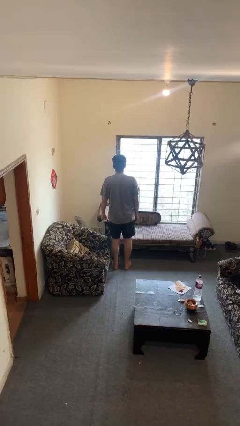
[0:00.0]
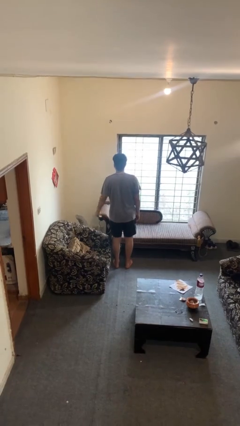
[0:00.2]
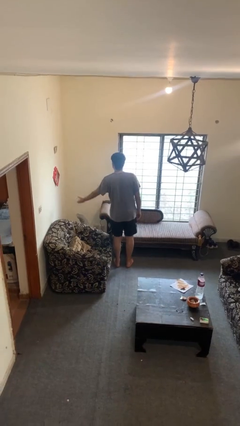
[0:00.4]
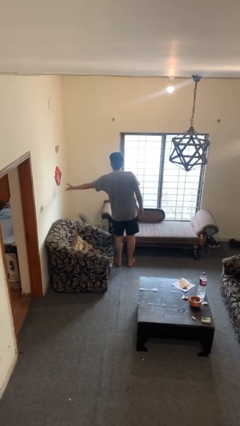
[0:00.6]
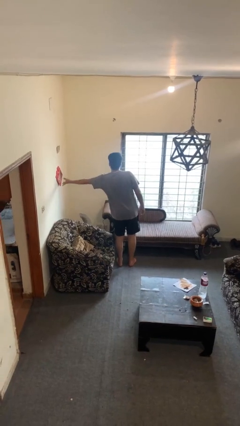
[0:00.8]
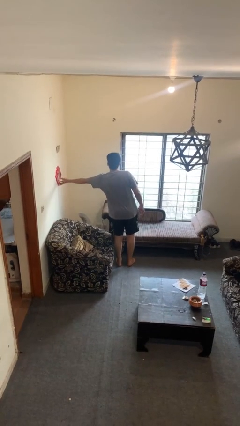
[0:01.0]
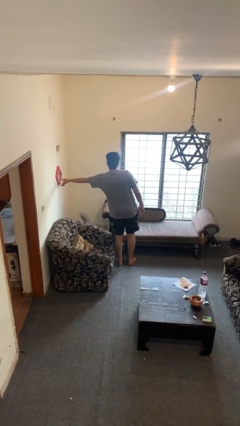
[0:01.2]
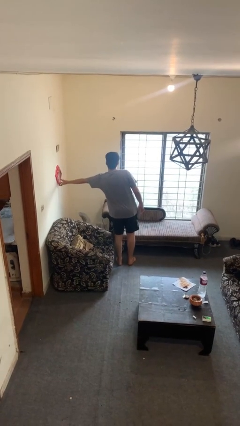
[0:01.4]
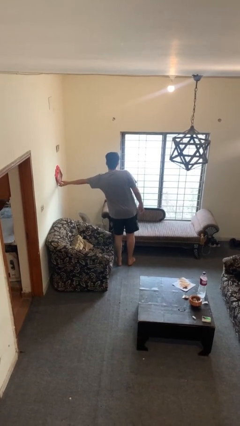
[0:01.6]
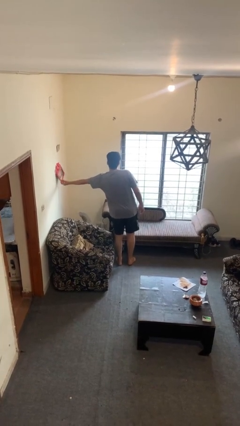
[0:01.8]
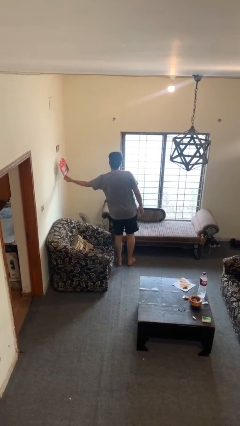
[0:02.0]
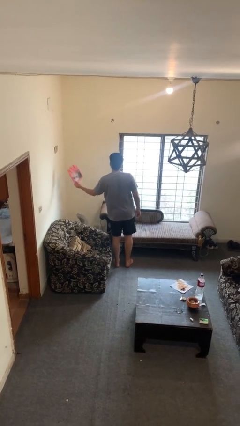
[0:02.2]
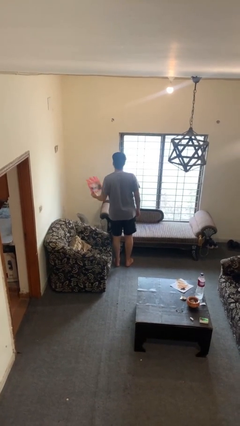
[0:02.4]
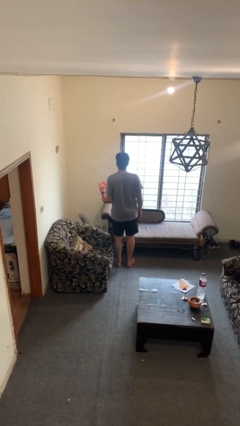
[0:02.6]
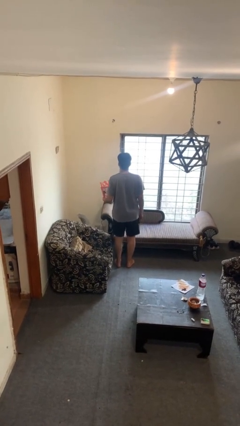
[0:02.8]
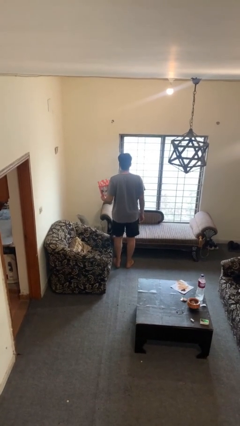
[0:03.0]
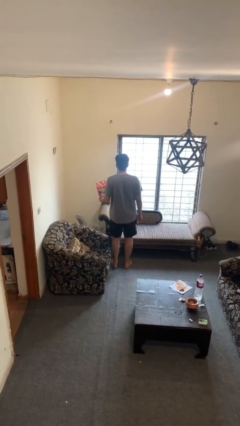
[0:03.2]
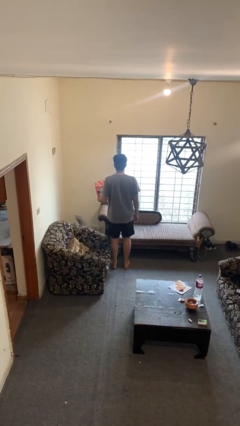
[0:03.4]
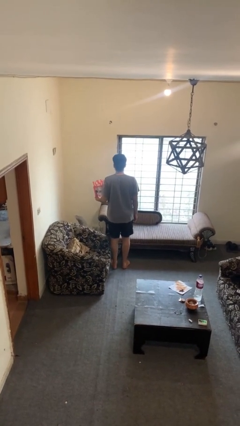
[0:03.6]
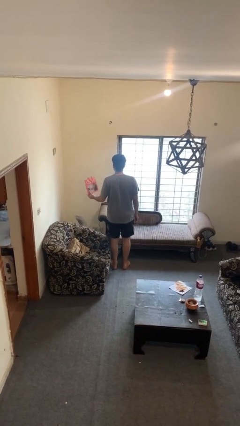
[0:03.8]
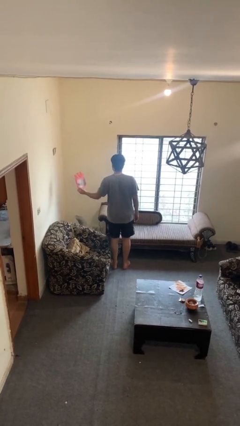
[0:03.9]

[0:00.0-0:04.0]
person takes down picture frame

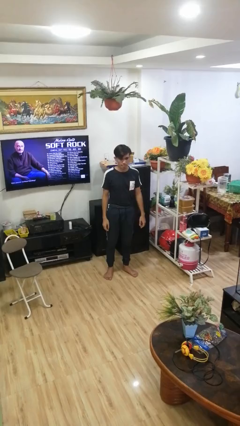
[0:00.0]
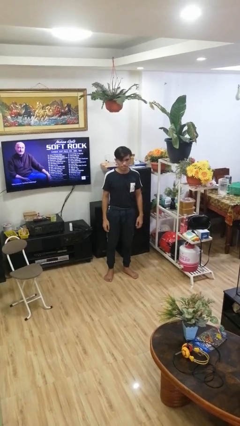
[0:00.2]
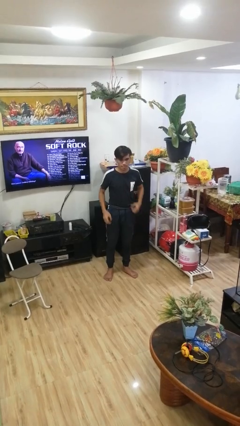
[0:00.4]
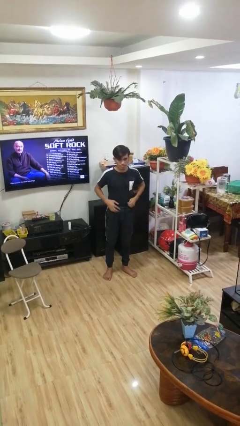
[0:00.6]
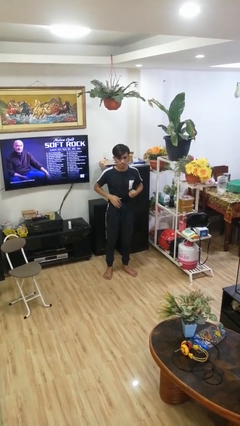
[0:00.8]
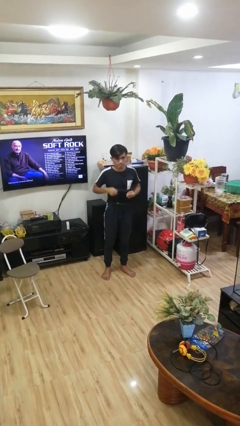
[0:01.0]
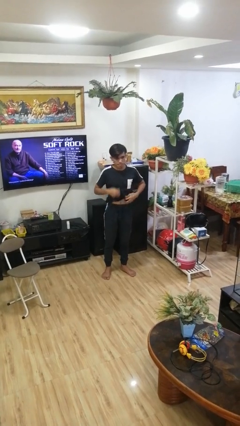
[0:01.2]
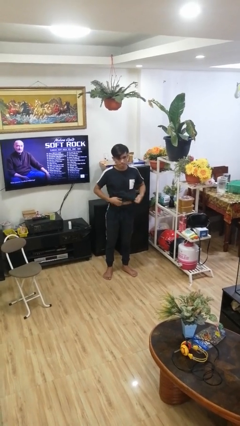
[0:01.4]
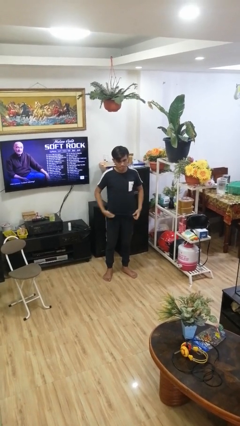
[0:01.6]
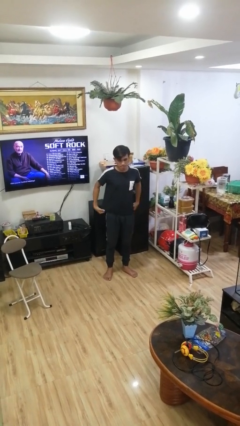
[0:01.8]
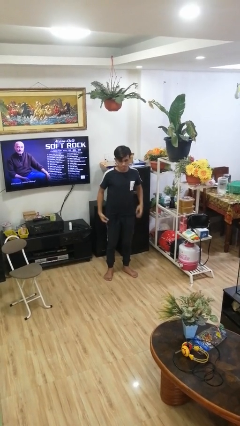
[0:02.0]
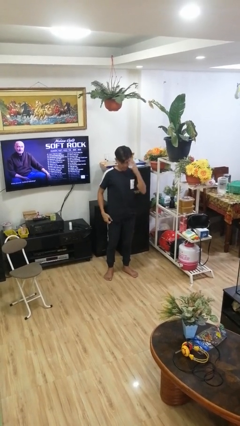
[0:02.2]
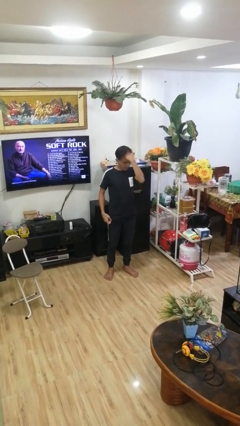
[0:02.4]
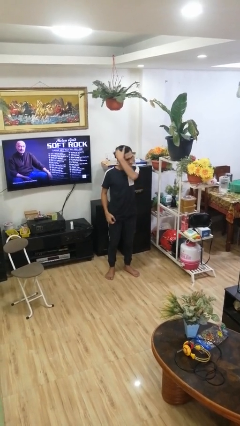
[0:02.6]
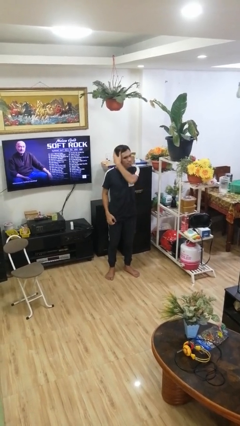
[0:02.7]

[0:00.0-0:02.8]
person untucks shirt

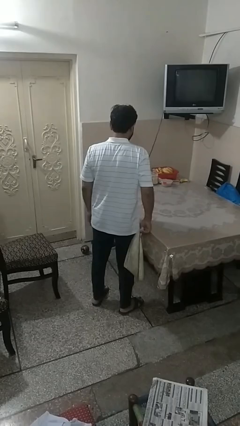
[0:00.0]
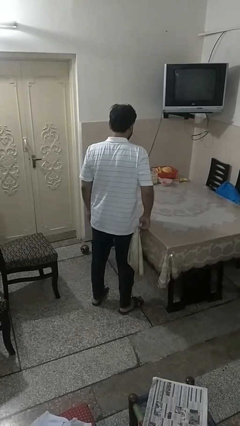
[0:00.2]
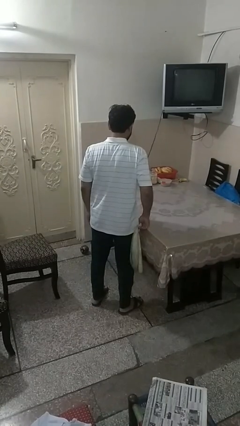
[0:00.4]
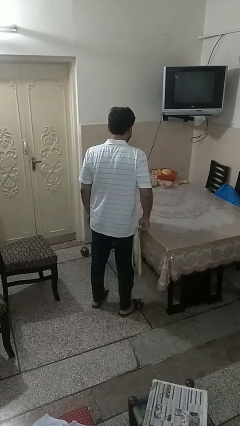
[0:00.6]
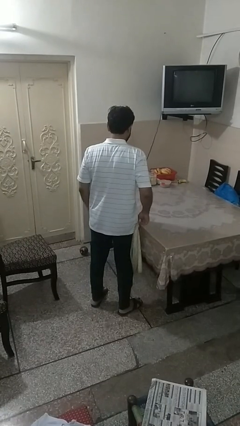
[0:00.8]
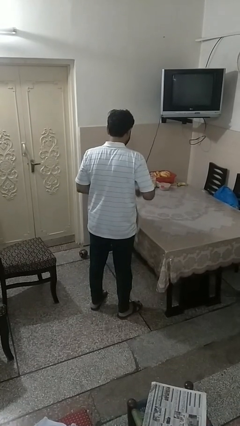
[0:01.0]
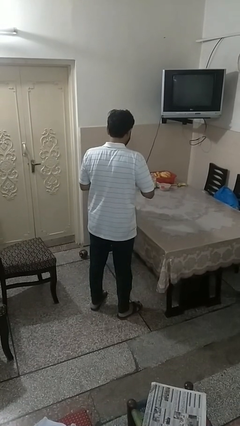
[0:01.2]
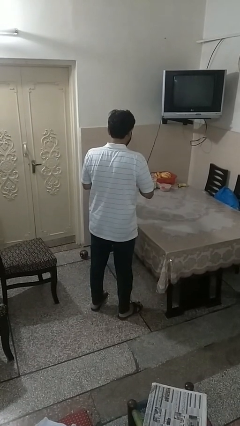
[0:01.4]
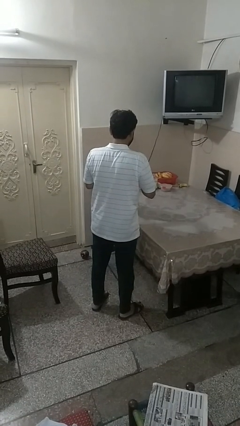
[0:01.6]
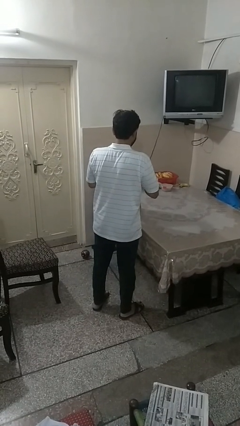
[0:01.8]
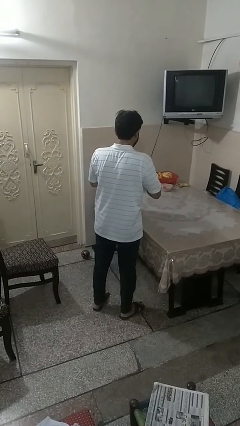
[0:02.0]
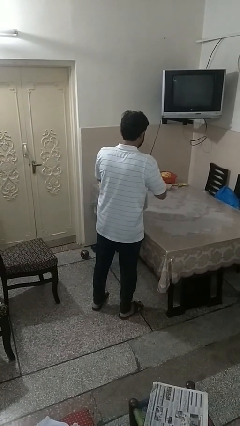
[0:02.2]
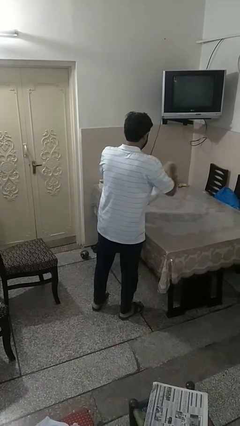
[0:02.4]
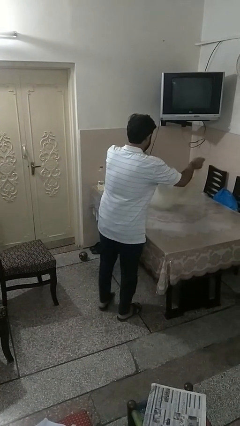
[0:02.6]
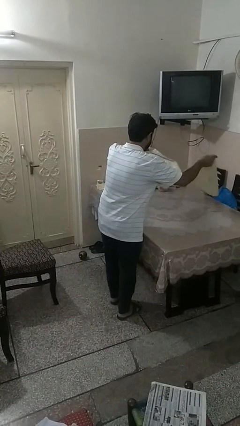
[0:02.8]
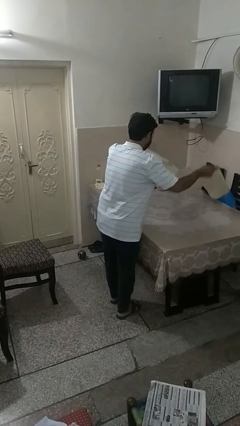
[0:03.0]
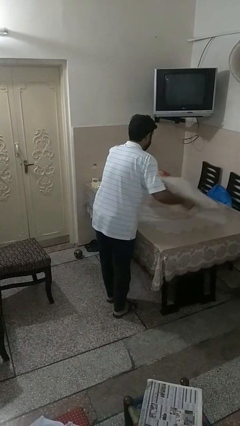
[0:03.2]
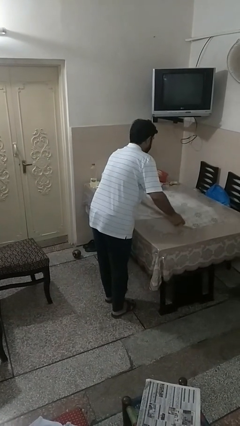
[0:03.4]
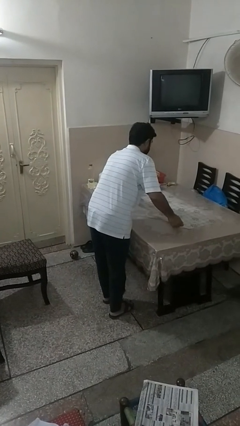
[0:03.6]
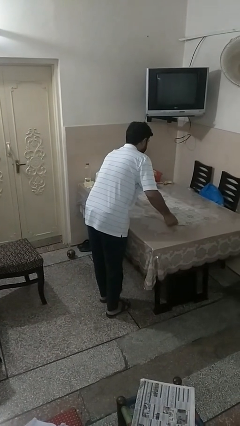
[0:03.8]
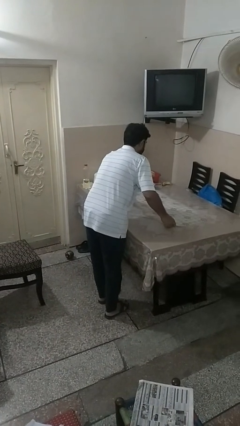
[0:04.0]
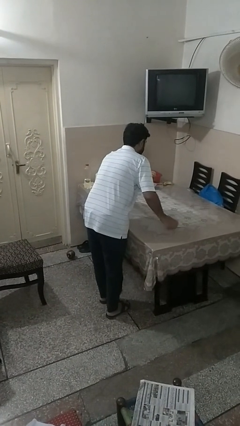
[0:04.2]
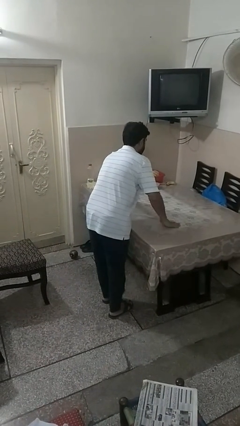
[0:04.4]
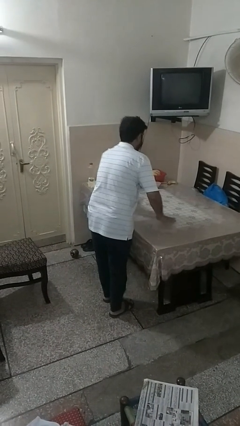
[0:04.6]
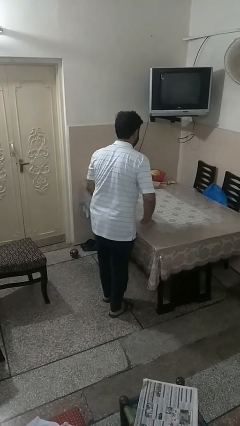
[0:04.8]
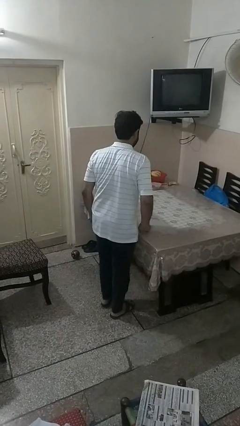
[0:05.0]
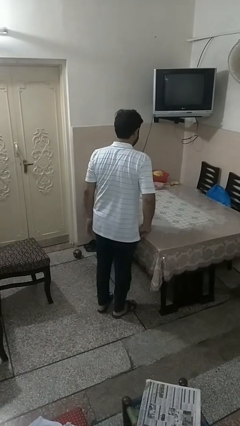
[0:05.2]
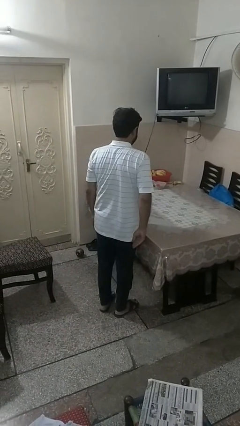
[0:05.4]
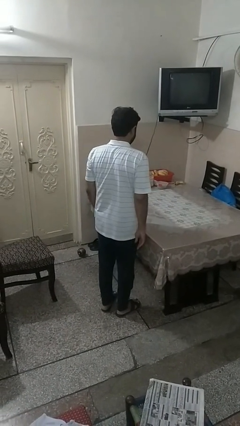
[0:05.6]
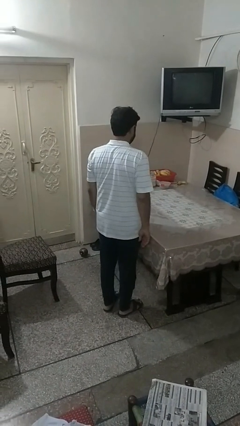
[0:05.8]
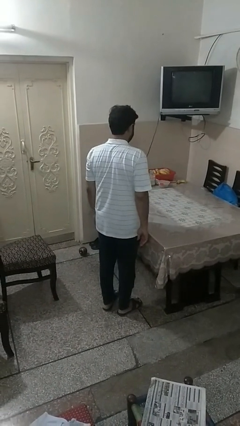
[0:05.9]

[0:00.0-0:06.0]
person spreads tablecloth

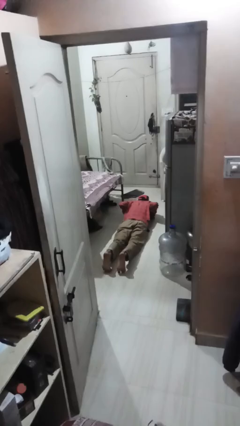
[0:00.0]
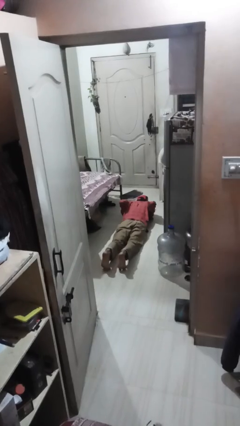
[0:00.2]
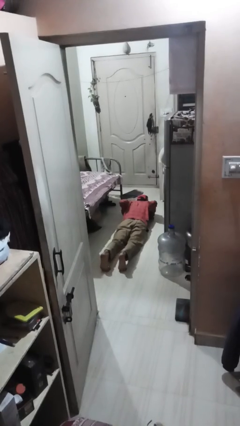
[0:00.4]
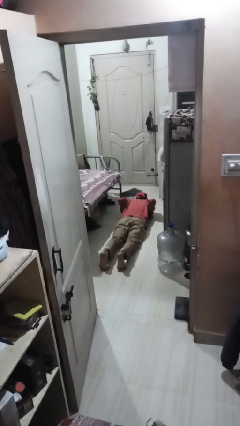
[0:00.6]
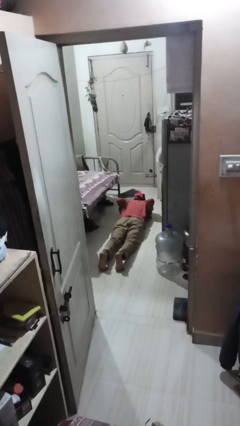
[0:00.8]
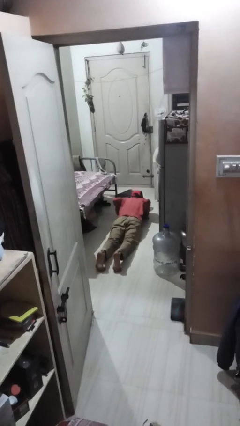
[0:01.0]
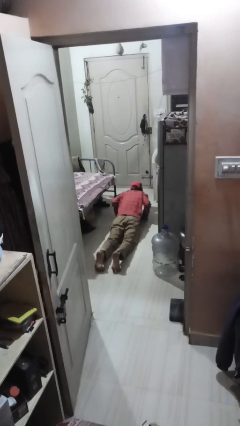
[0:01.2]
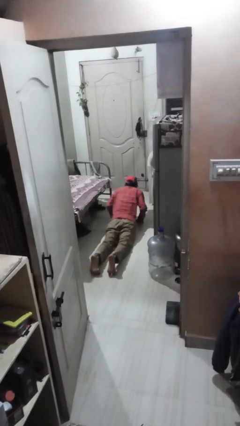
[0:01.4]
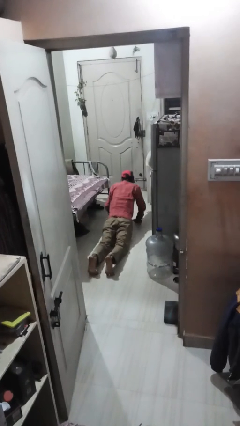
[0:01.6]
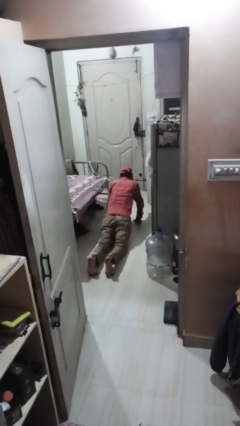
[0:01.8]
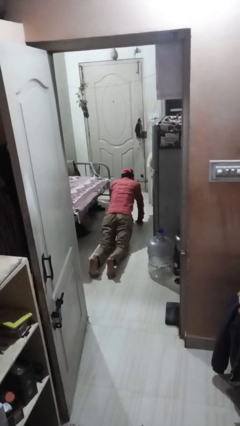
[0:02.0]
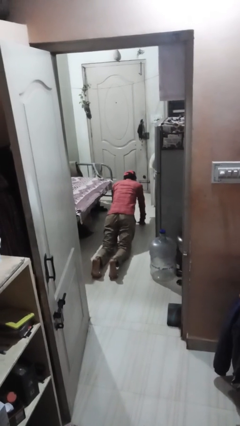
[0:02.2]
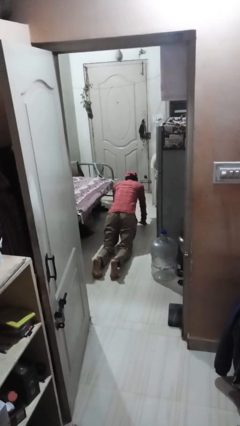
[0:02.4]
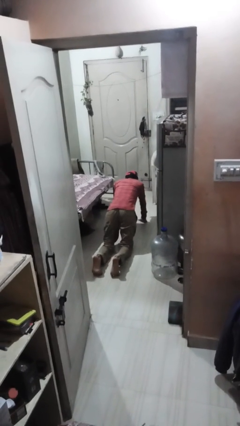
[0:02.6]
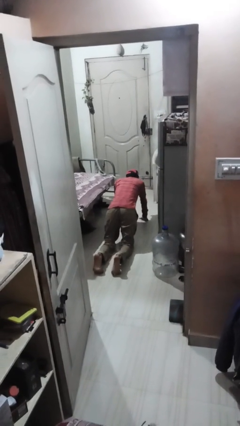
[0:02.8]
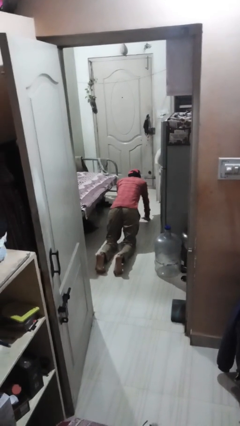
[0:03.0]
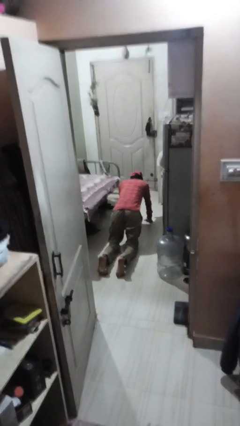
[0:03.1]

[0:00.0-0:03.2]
person exercises with pushup

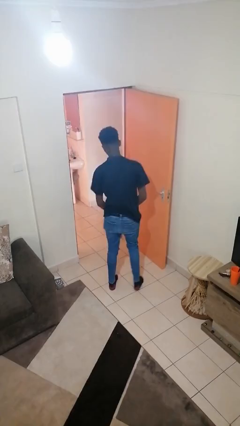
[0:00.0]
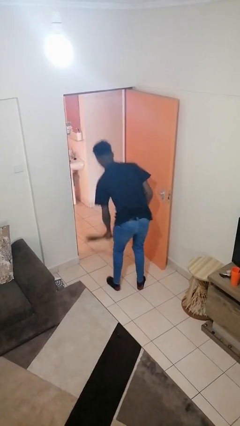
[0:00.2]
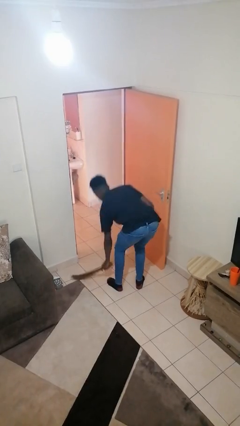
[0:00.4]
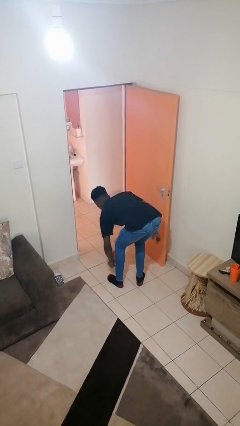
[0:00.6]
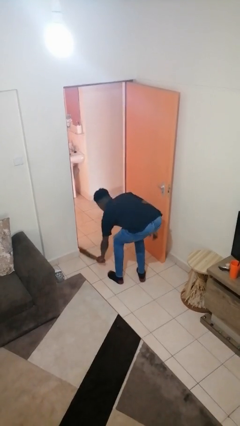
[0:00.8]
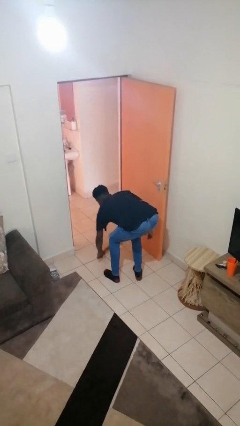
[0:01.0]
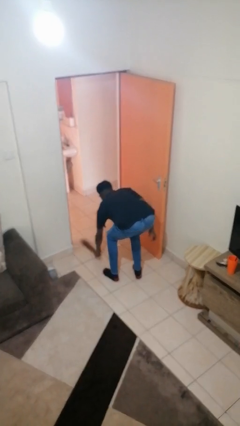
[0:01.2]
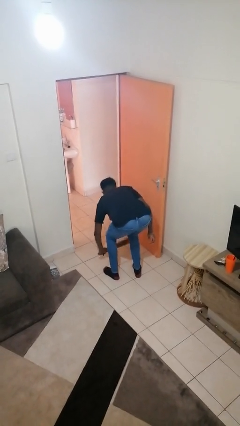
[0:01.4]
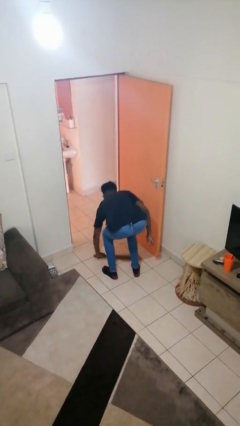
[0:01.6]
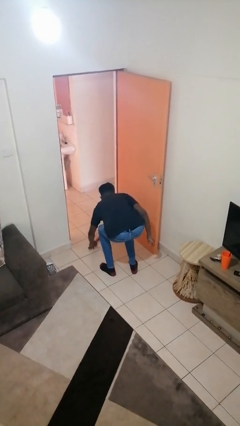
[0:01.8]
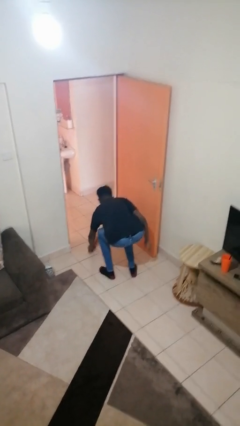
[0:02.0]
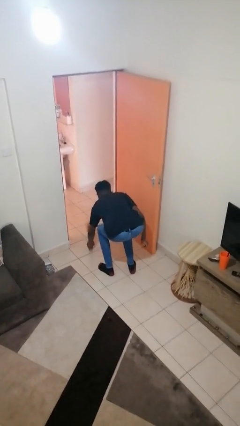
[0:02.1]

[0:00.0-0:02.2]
person sweeps floor
